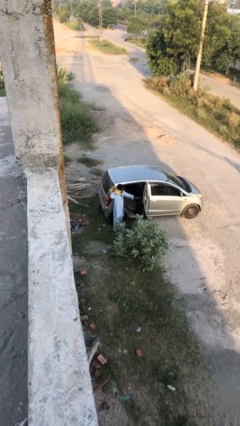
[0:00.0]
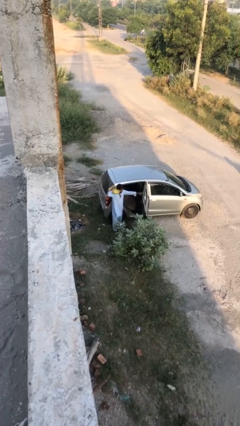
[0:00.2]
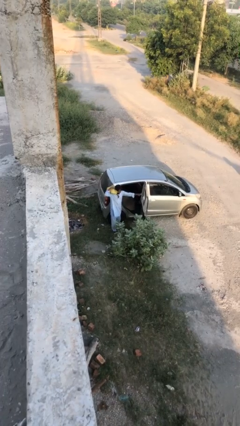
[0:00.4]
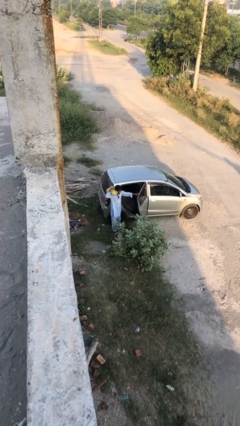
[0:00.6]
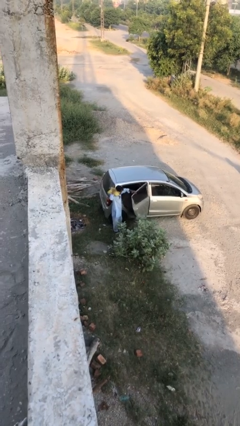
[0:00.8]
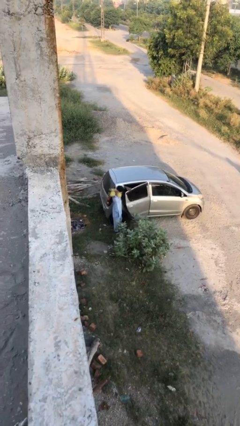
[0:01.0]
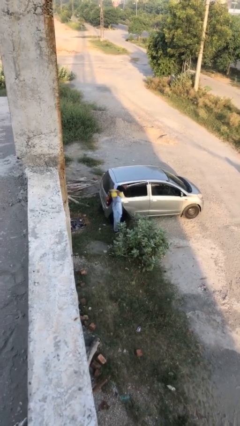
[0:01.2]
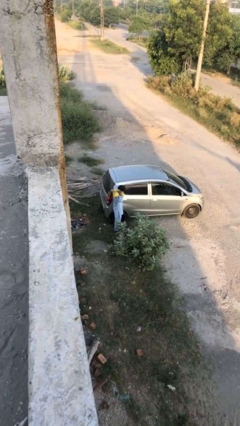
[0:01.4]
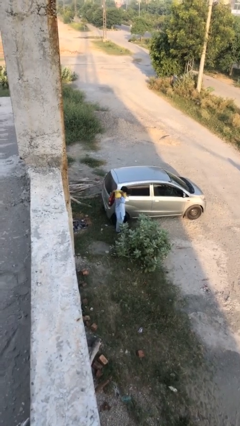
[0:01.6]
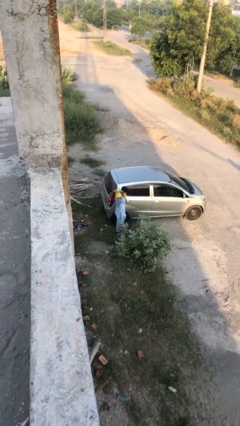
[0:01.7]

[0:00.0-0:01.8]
person closes car door

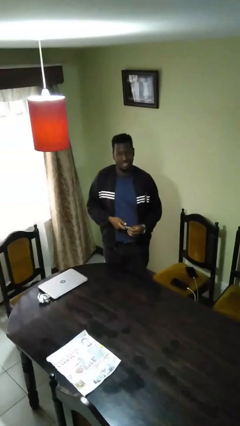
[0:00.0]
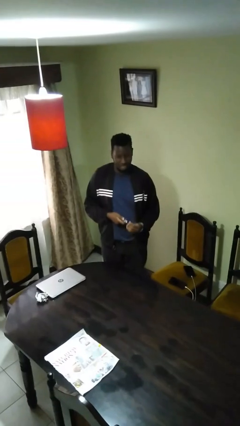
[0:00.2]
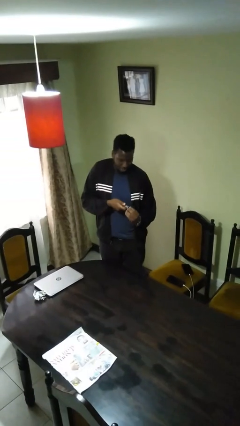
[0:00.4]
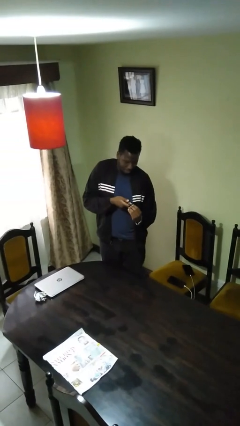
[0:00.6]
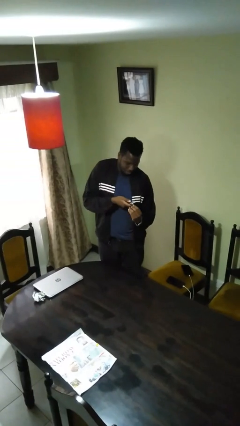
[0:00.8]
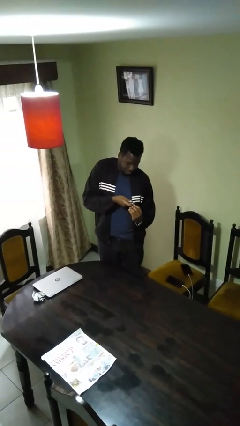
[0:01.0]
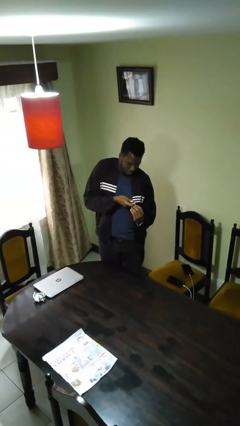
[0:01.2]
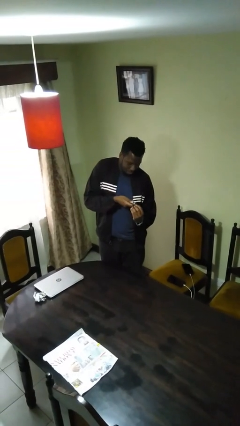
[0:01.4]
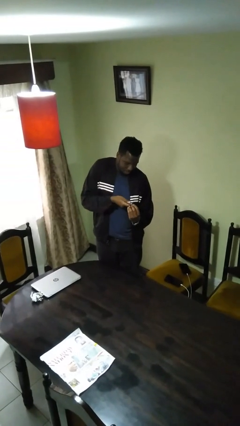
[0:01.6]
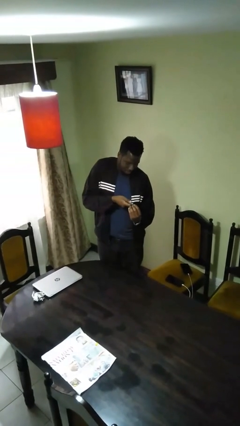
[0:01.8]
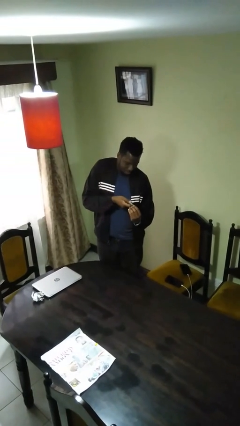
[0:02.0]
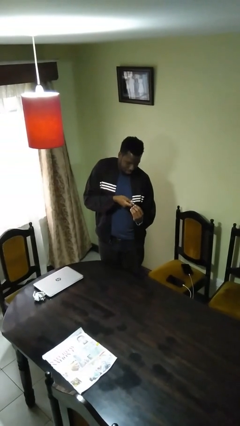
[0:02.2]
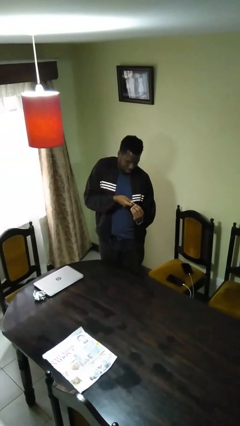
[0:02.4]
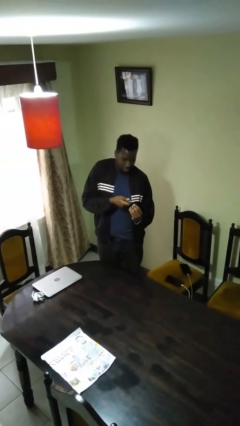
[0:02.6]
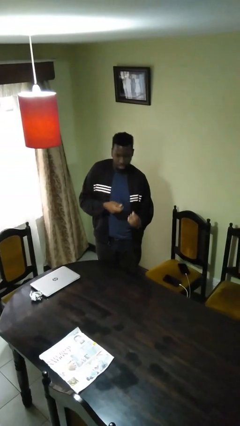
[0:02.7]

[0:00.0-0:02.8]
person clips fingernails

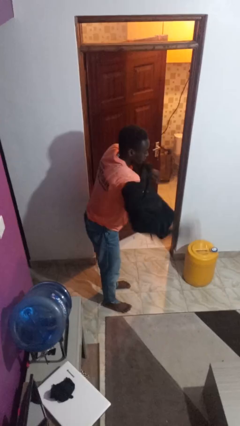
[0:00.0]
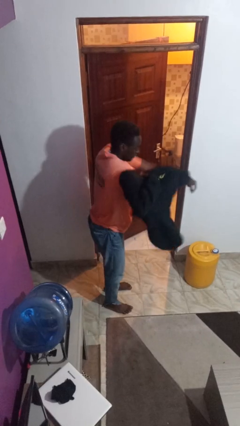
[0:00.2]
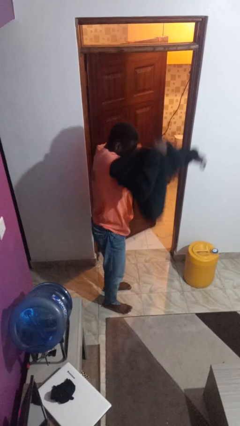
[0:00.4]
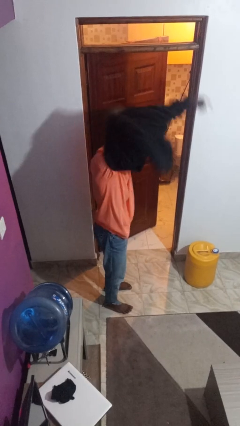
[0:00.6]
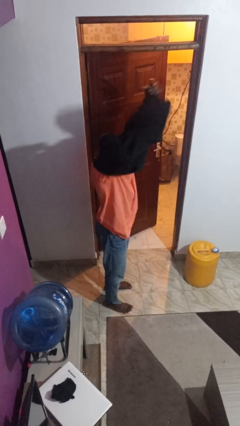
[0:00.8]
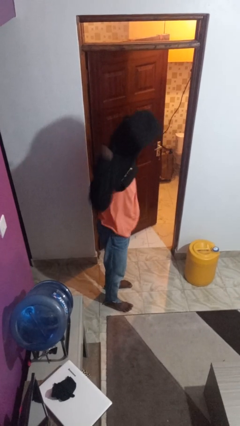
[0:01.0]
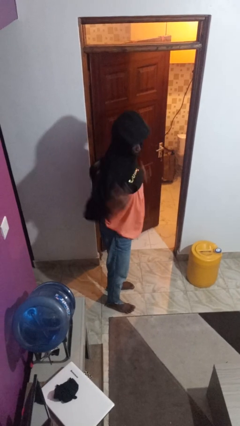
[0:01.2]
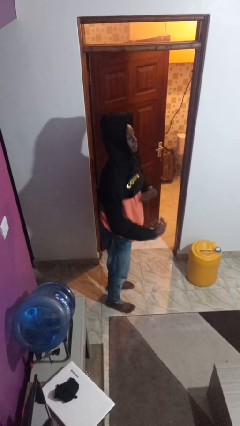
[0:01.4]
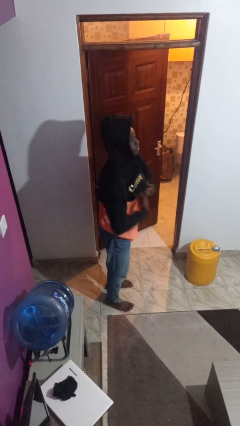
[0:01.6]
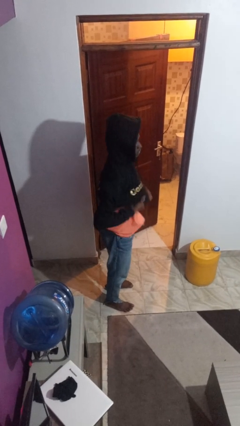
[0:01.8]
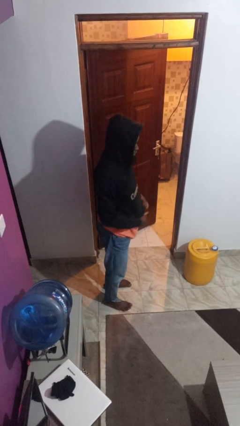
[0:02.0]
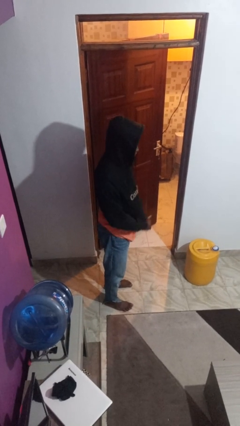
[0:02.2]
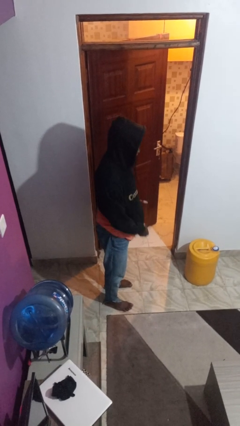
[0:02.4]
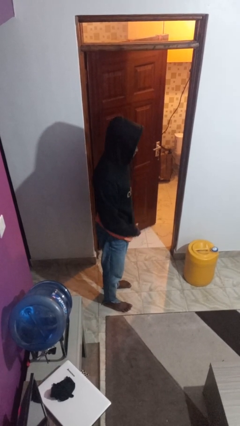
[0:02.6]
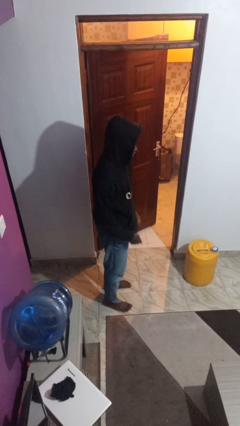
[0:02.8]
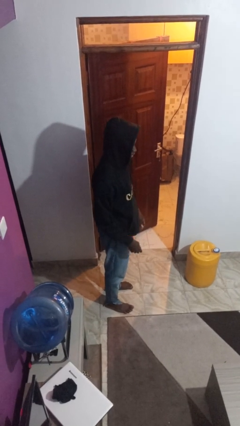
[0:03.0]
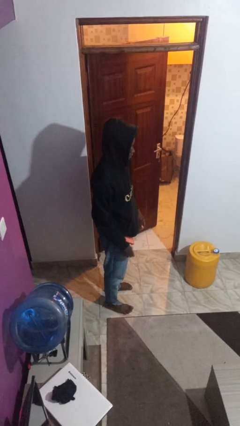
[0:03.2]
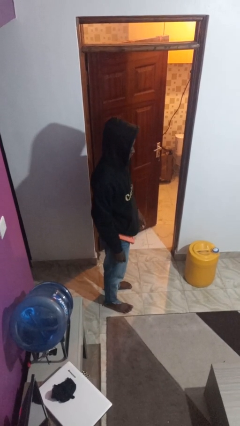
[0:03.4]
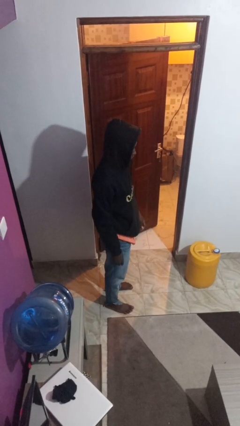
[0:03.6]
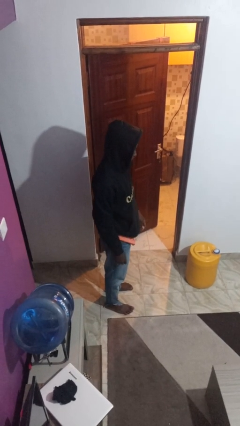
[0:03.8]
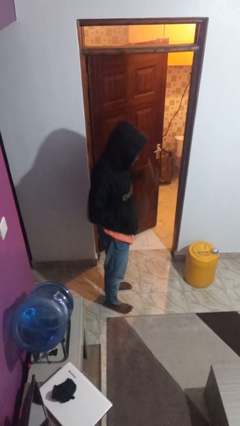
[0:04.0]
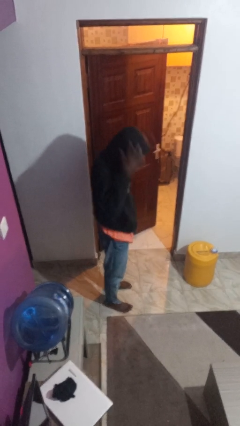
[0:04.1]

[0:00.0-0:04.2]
person puts on hoodie

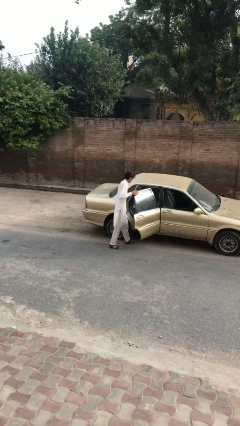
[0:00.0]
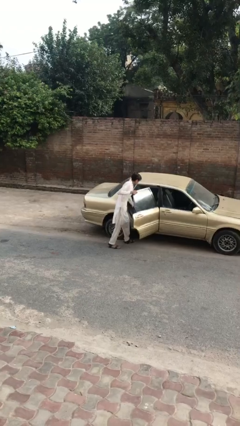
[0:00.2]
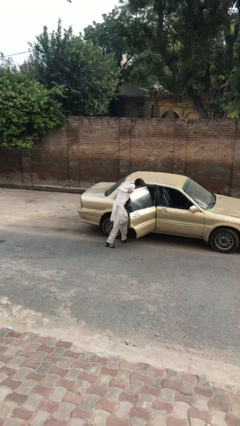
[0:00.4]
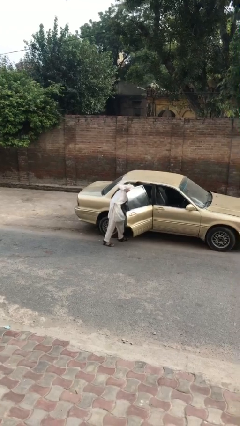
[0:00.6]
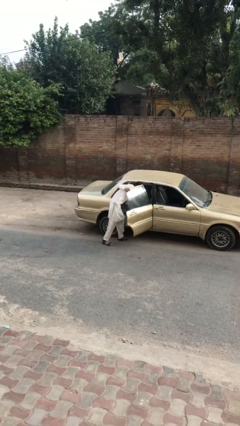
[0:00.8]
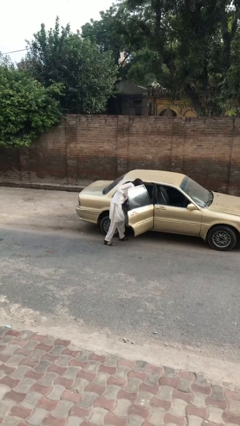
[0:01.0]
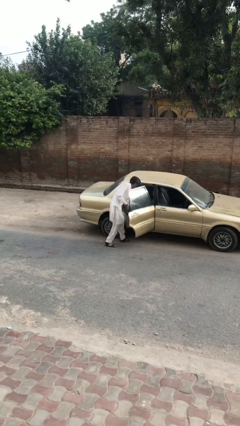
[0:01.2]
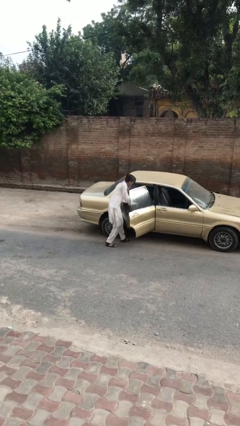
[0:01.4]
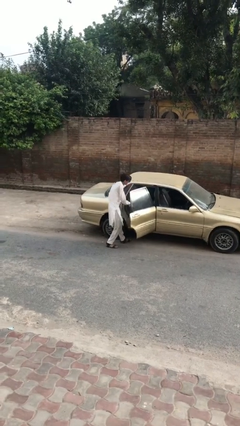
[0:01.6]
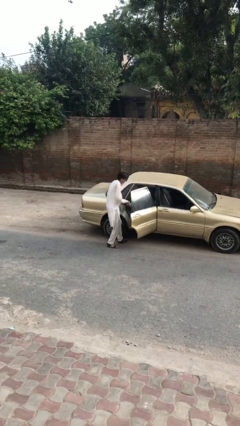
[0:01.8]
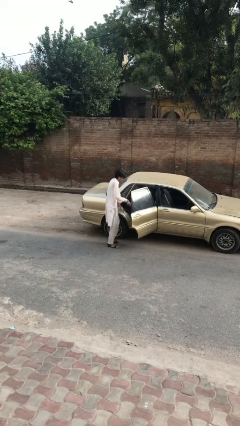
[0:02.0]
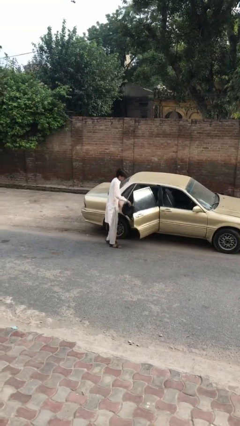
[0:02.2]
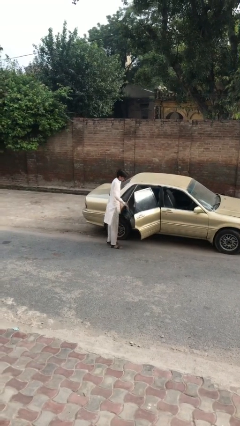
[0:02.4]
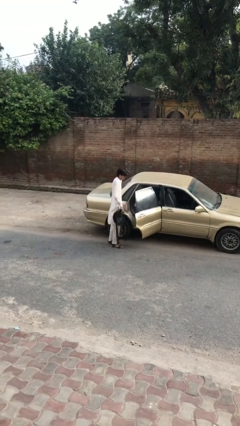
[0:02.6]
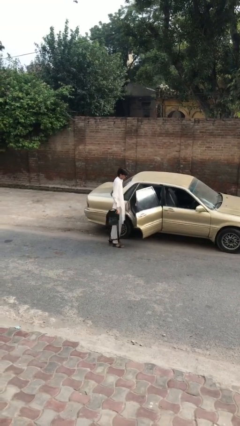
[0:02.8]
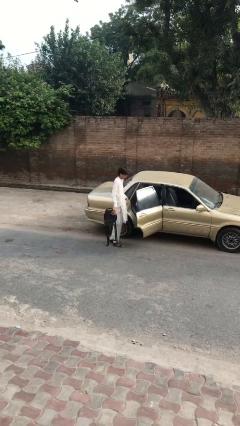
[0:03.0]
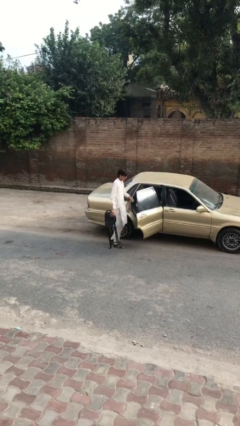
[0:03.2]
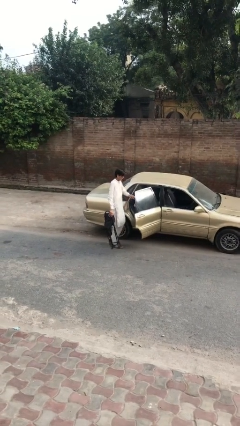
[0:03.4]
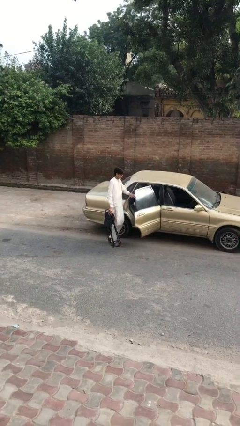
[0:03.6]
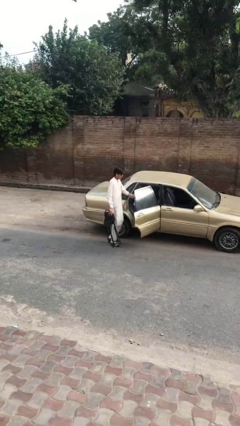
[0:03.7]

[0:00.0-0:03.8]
person unloads car

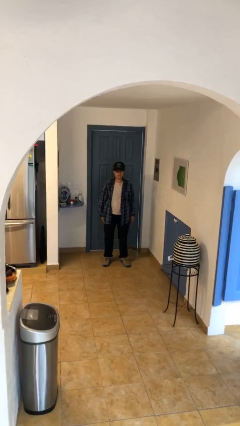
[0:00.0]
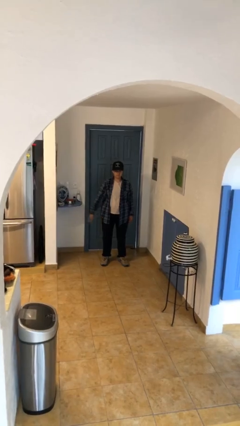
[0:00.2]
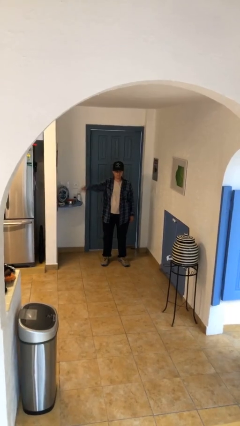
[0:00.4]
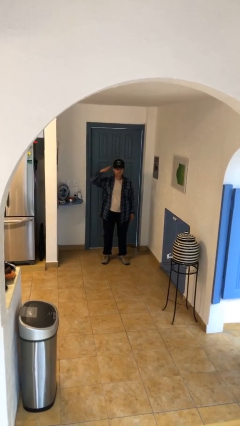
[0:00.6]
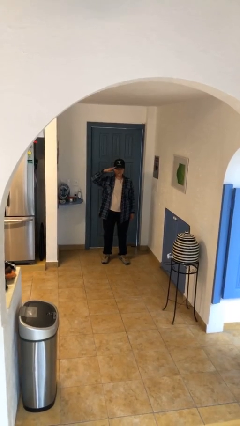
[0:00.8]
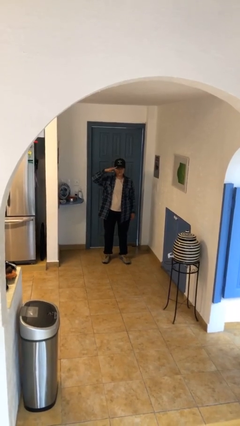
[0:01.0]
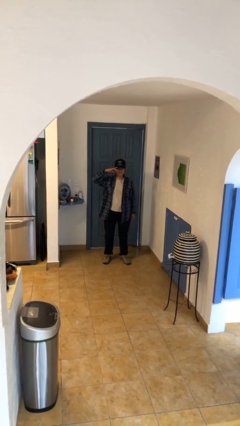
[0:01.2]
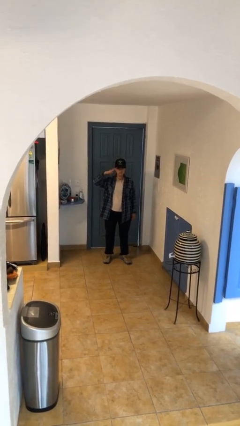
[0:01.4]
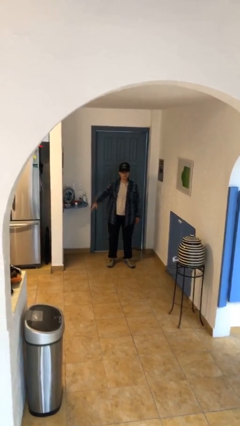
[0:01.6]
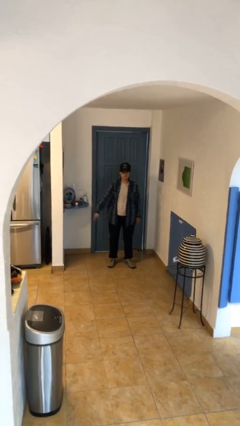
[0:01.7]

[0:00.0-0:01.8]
person salutes

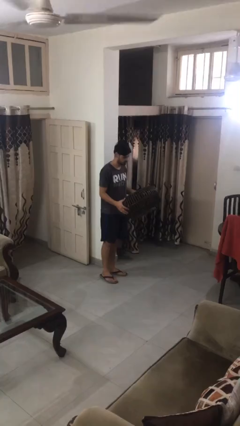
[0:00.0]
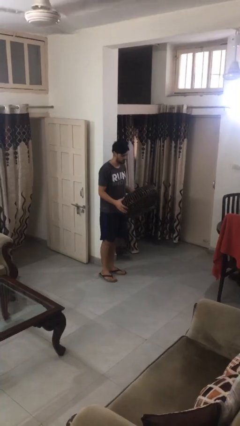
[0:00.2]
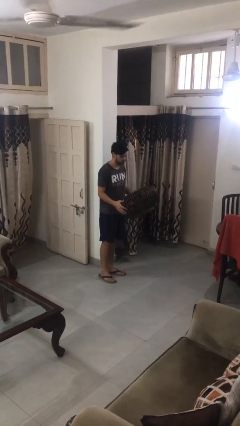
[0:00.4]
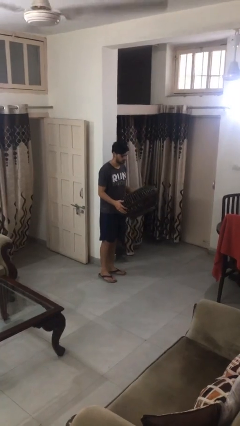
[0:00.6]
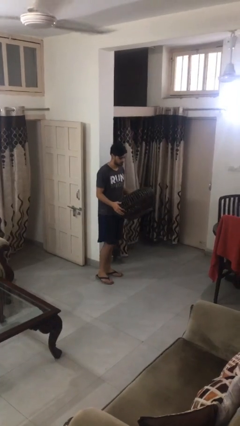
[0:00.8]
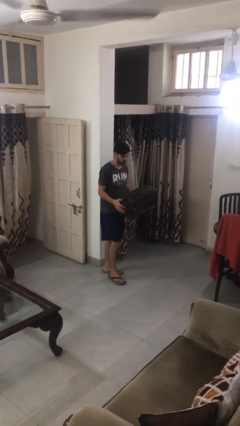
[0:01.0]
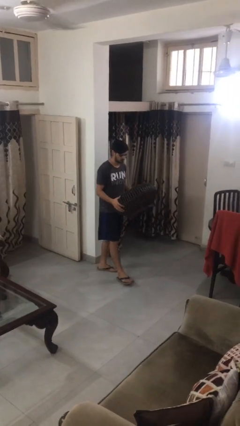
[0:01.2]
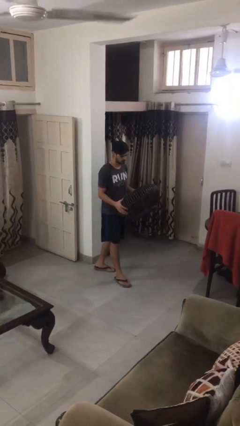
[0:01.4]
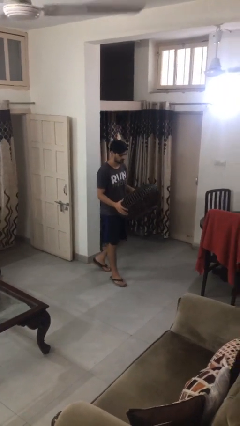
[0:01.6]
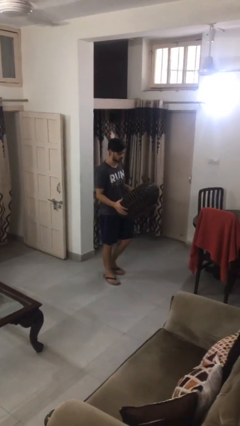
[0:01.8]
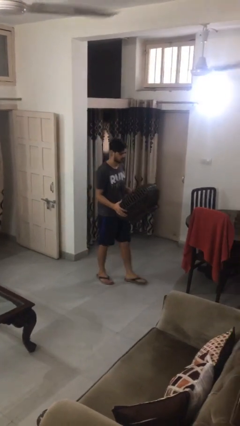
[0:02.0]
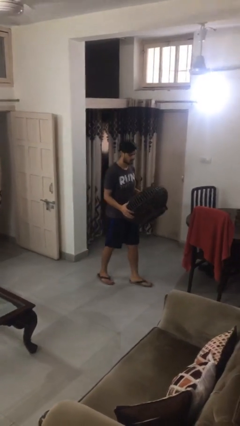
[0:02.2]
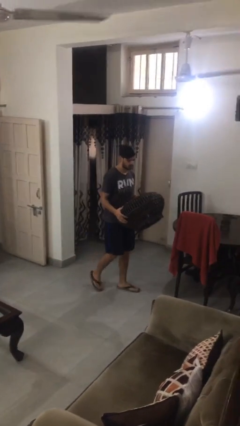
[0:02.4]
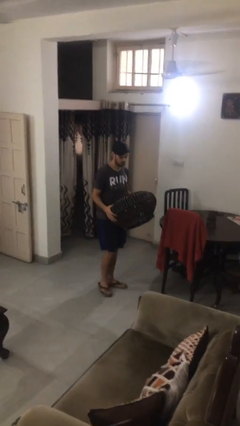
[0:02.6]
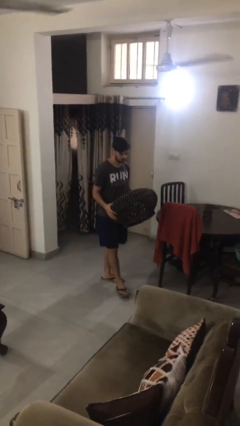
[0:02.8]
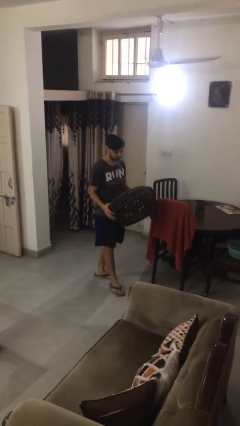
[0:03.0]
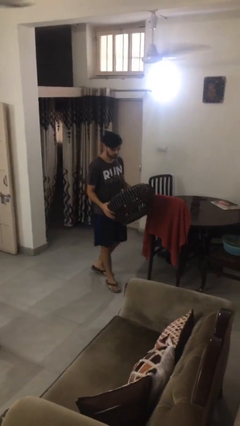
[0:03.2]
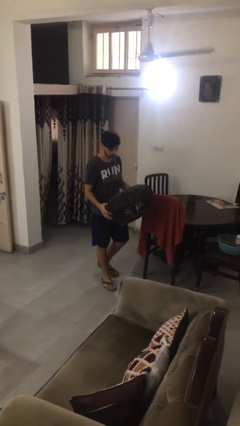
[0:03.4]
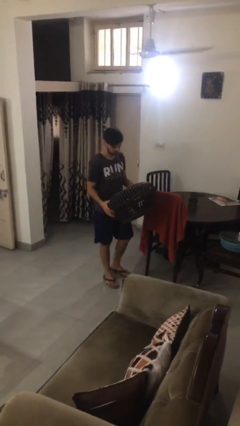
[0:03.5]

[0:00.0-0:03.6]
person carries furniture
